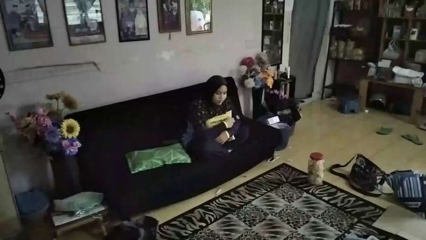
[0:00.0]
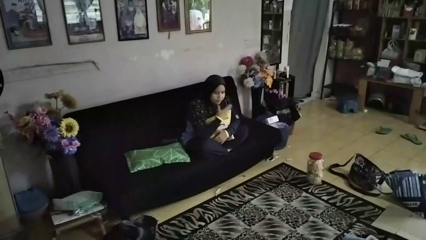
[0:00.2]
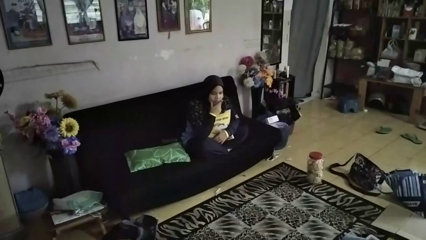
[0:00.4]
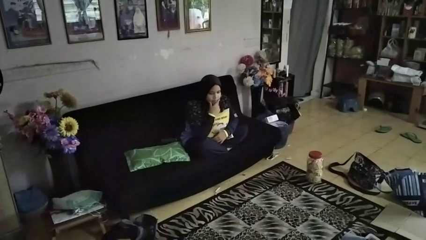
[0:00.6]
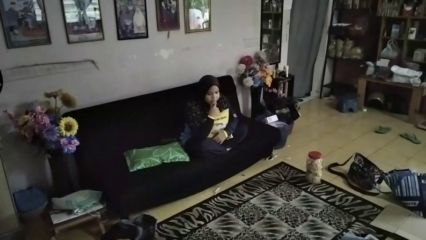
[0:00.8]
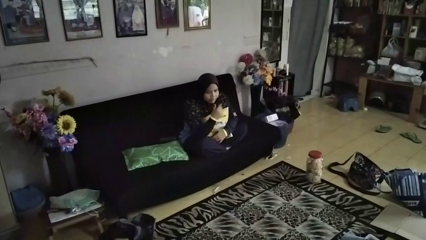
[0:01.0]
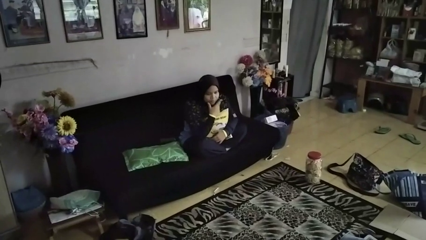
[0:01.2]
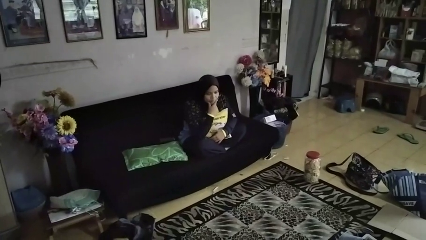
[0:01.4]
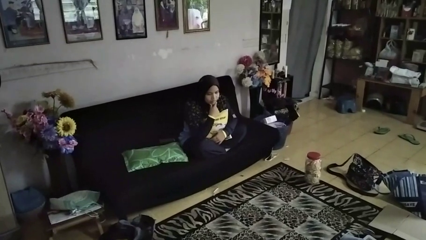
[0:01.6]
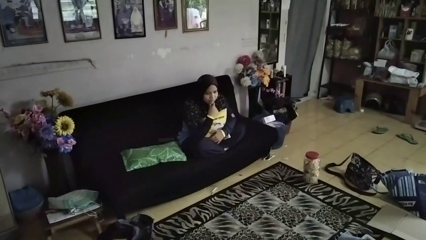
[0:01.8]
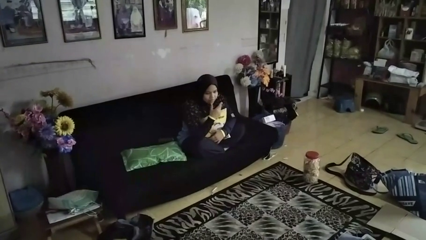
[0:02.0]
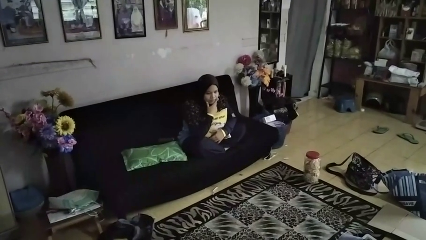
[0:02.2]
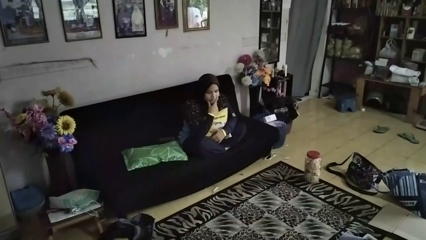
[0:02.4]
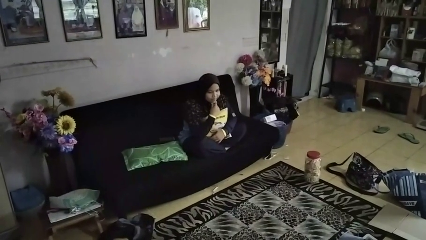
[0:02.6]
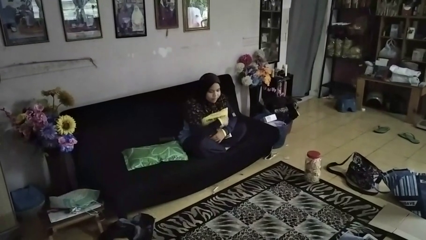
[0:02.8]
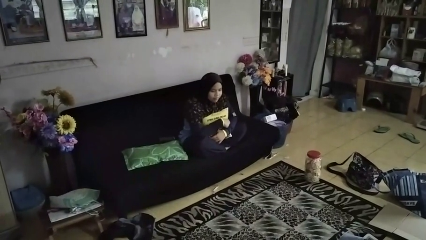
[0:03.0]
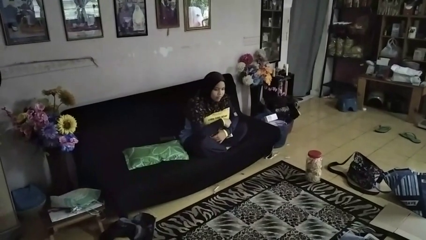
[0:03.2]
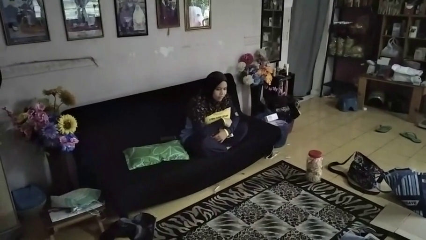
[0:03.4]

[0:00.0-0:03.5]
person strokes chin

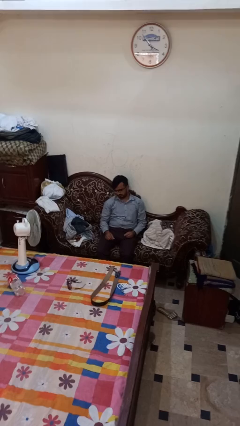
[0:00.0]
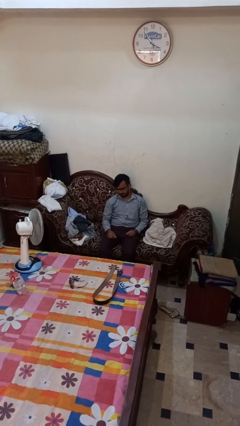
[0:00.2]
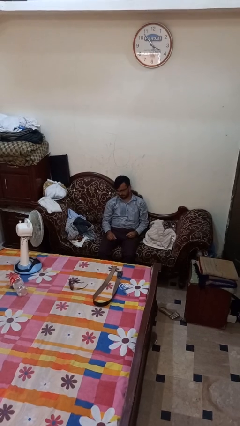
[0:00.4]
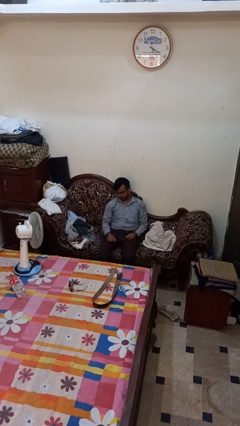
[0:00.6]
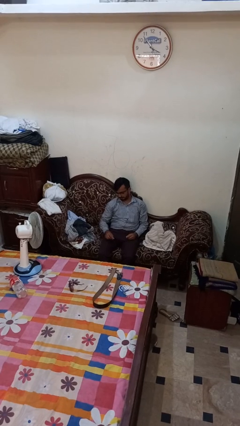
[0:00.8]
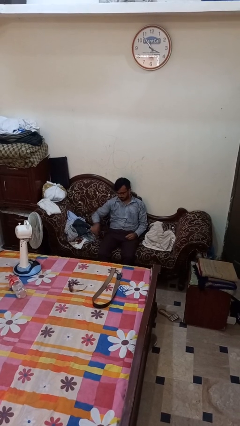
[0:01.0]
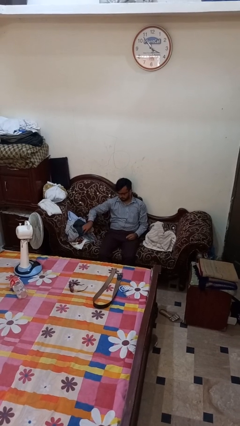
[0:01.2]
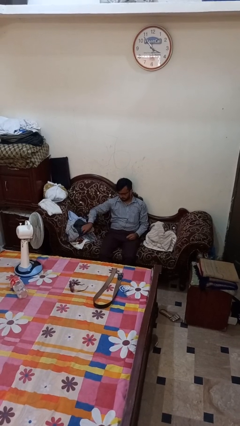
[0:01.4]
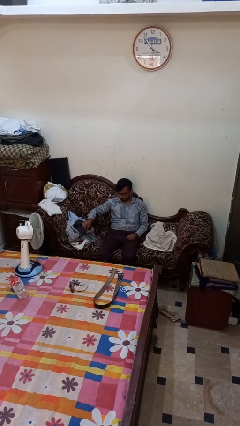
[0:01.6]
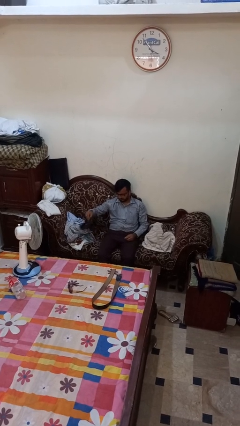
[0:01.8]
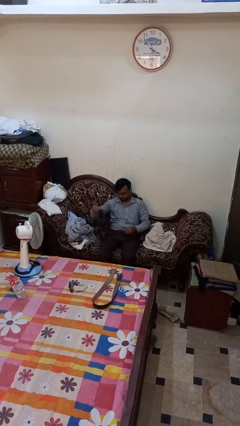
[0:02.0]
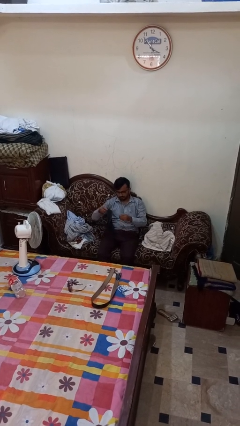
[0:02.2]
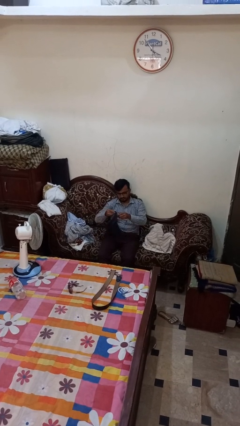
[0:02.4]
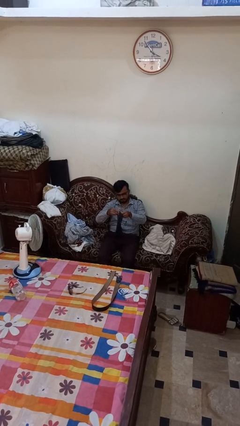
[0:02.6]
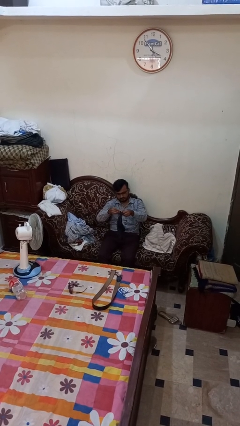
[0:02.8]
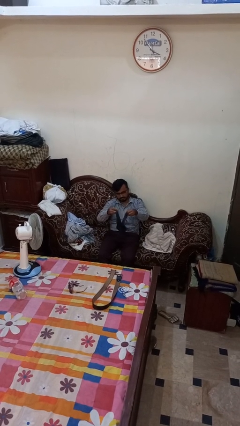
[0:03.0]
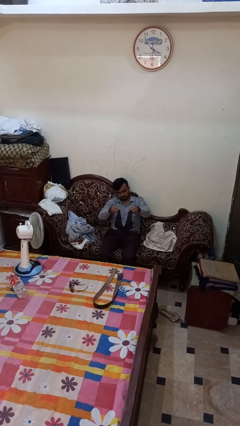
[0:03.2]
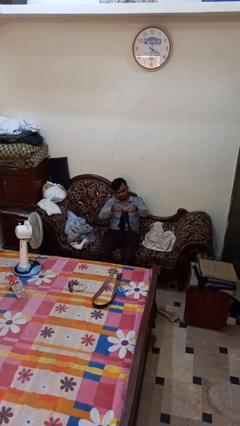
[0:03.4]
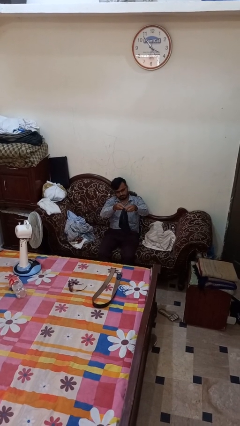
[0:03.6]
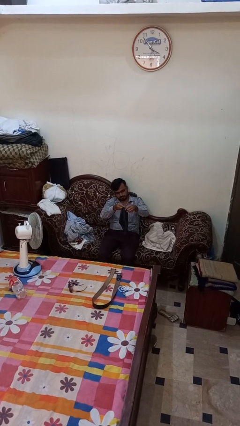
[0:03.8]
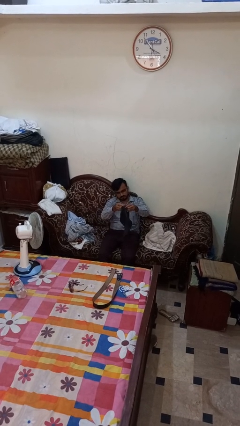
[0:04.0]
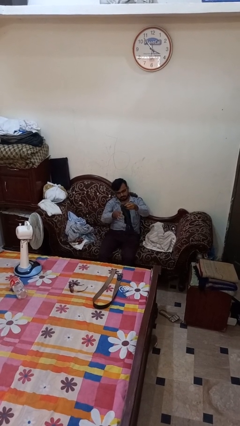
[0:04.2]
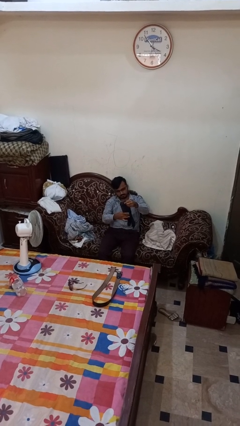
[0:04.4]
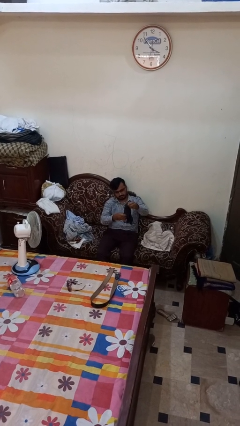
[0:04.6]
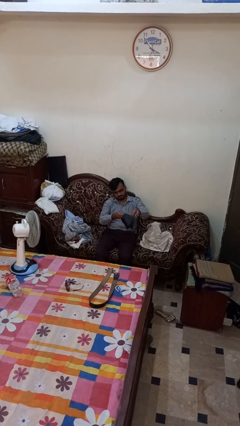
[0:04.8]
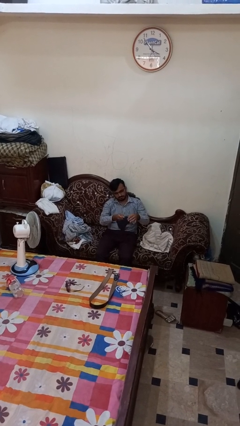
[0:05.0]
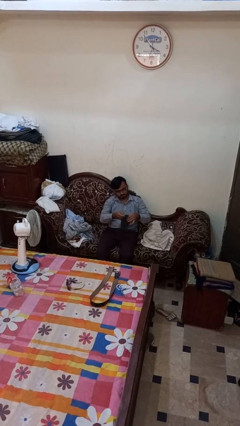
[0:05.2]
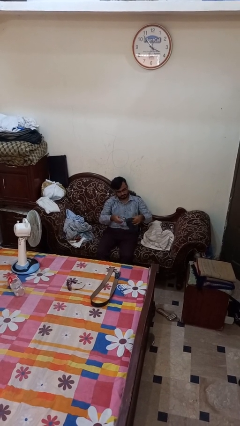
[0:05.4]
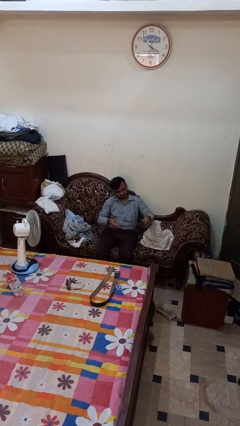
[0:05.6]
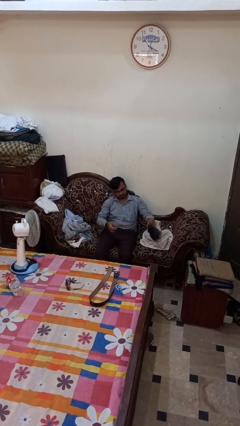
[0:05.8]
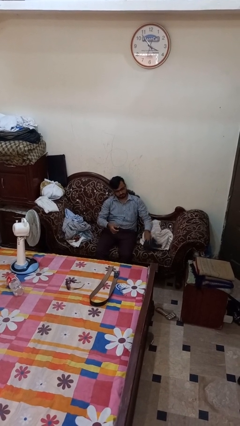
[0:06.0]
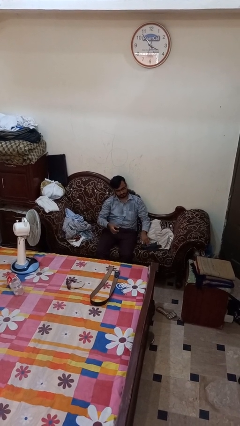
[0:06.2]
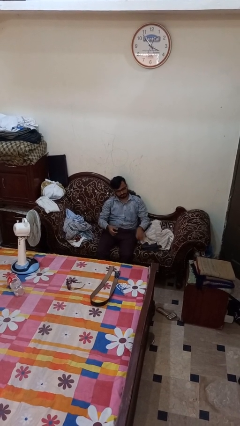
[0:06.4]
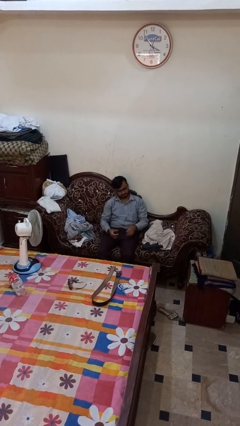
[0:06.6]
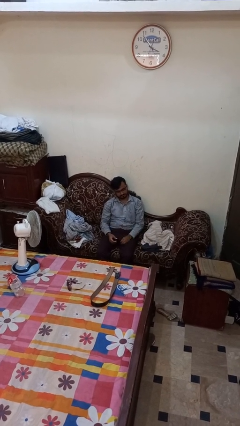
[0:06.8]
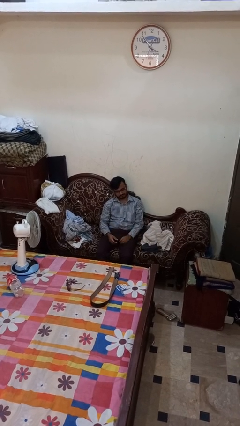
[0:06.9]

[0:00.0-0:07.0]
person folds socks

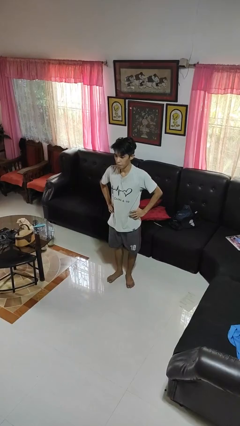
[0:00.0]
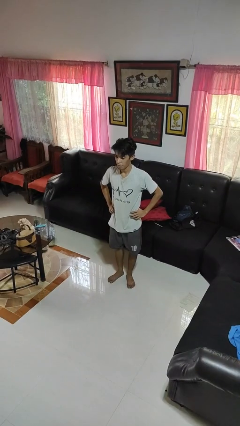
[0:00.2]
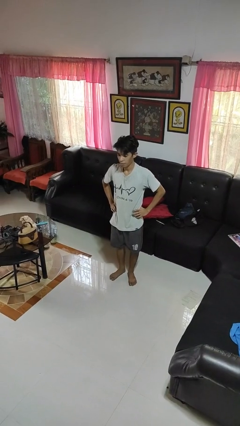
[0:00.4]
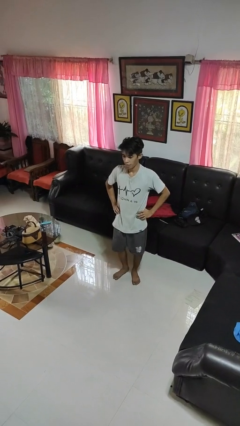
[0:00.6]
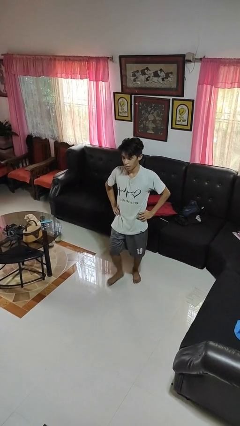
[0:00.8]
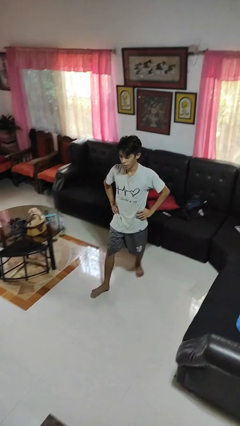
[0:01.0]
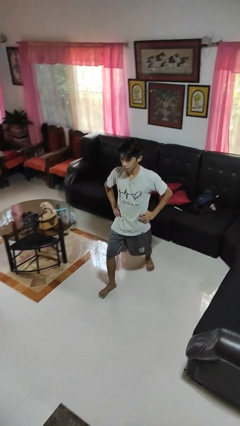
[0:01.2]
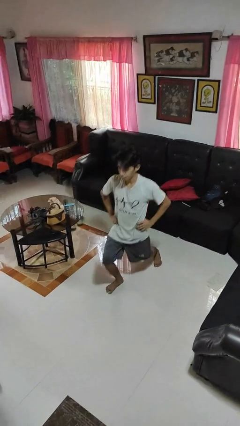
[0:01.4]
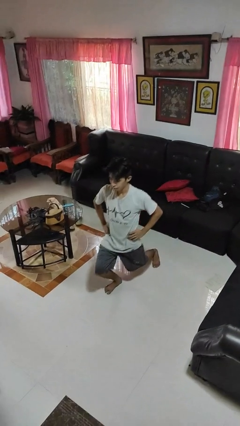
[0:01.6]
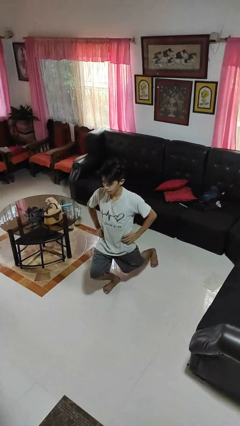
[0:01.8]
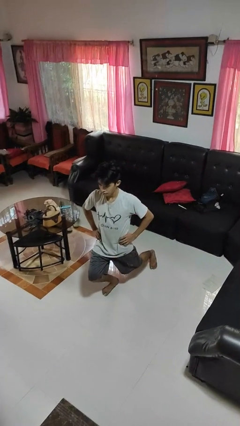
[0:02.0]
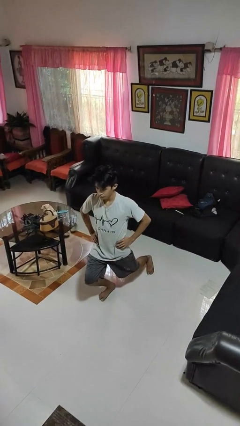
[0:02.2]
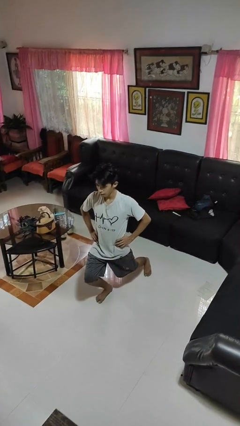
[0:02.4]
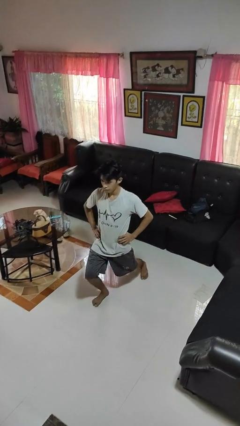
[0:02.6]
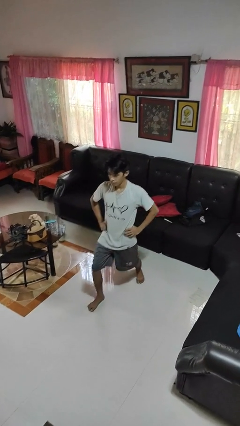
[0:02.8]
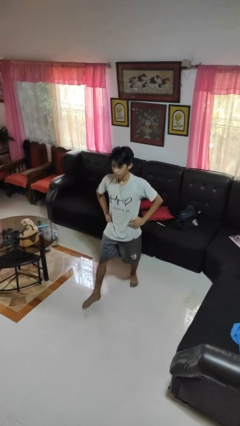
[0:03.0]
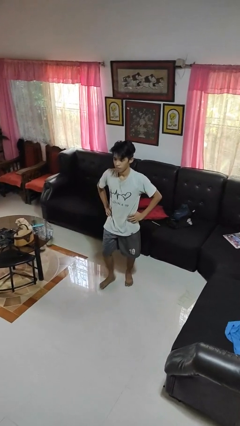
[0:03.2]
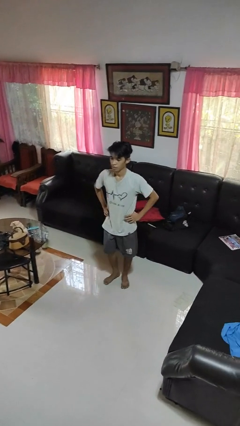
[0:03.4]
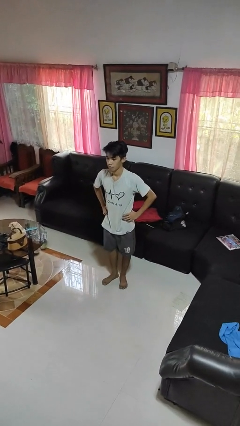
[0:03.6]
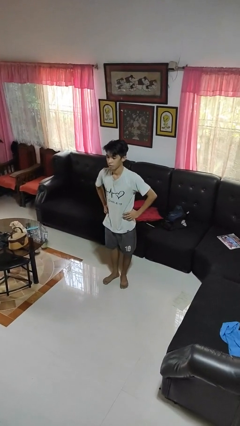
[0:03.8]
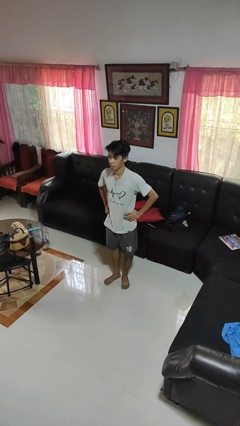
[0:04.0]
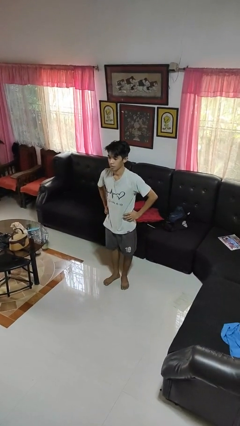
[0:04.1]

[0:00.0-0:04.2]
person exercises with lunges

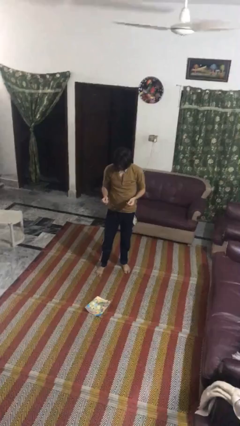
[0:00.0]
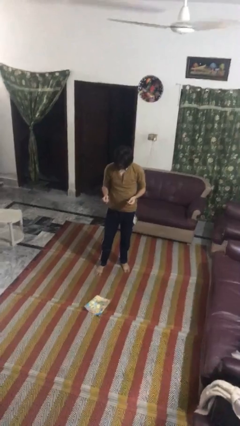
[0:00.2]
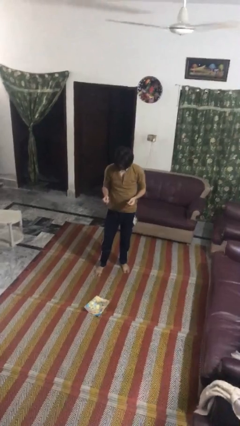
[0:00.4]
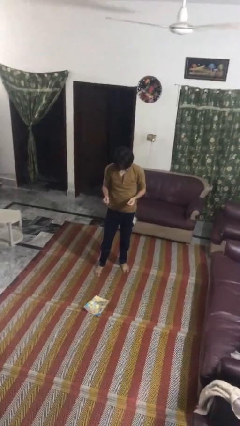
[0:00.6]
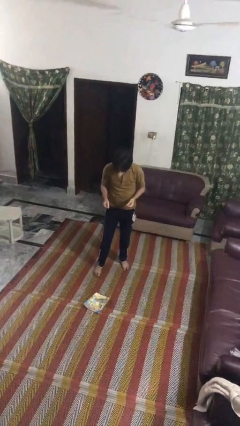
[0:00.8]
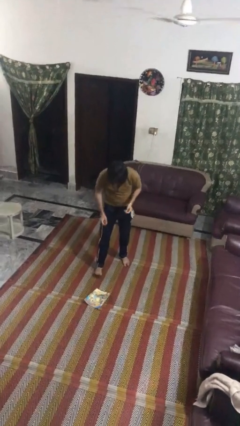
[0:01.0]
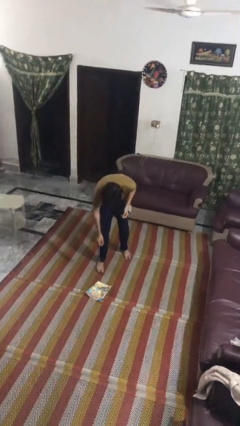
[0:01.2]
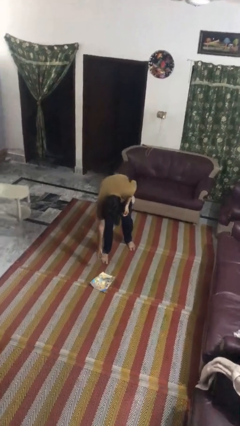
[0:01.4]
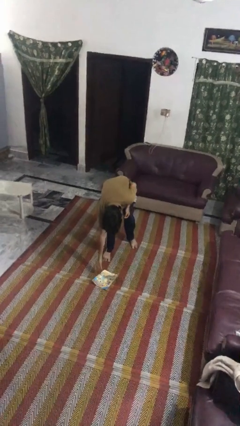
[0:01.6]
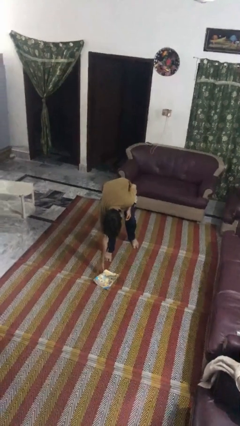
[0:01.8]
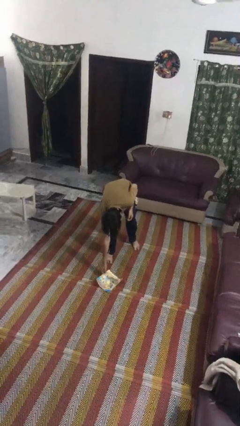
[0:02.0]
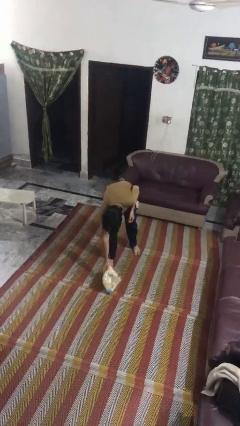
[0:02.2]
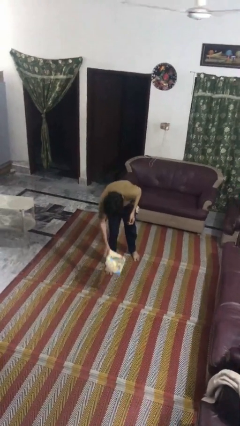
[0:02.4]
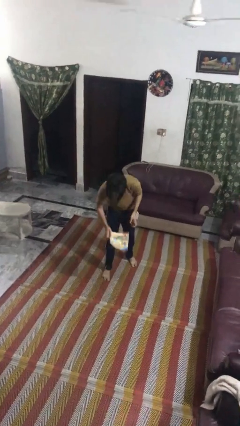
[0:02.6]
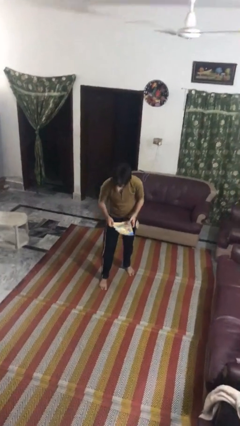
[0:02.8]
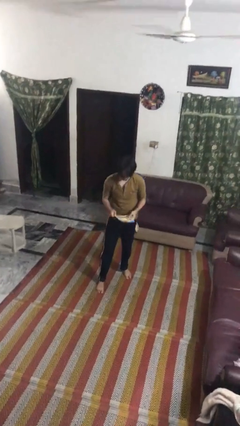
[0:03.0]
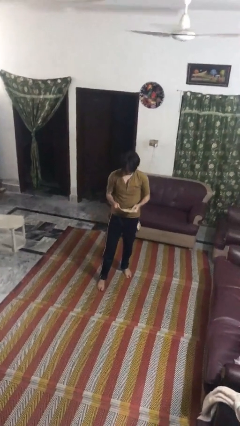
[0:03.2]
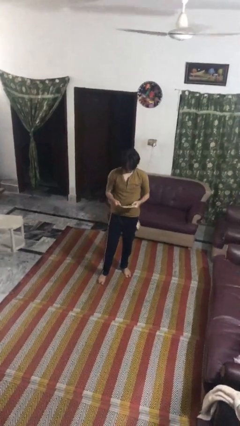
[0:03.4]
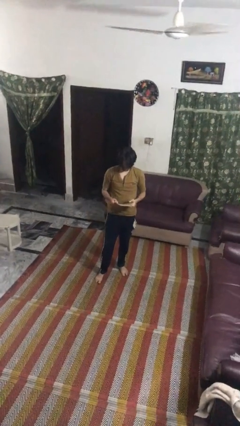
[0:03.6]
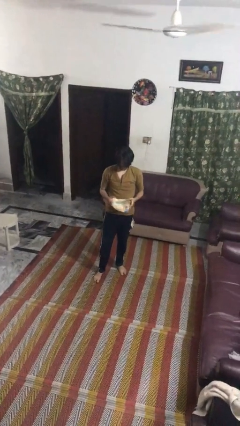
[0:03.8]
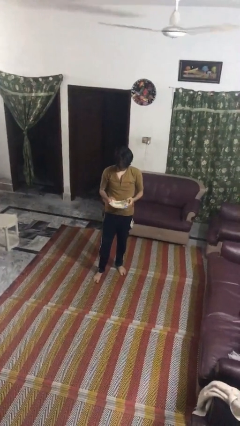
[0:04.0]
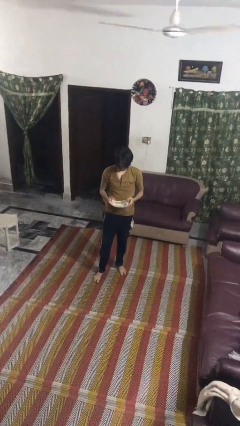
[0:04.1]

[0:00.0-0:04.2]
person picks up object from floor
